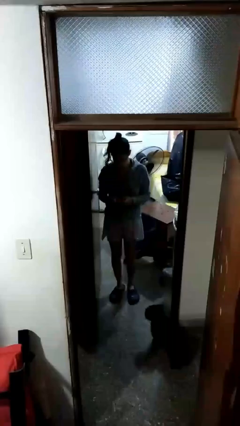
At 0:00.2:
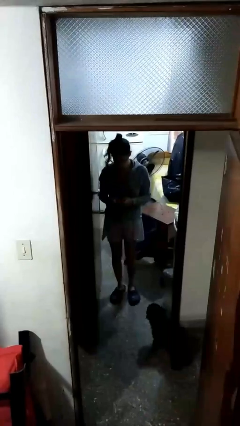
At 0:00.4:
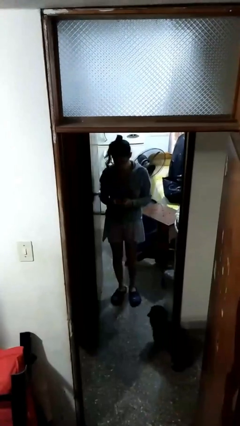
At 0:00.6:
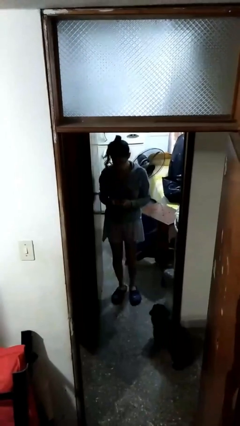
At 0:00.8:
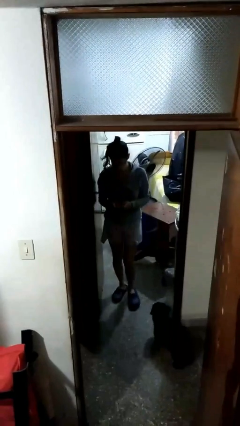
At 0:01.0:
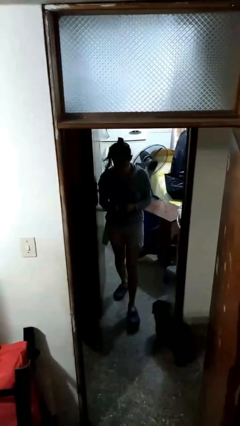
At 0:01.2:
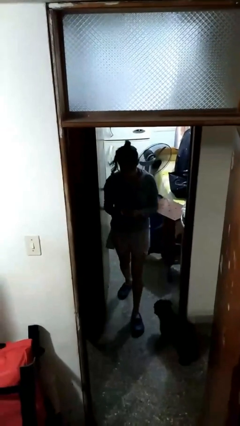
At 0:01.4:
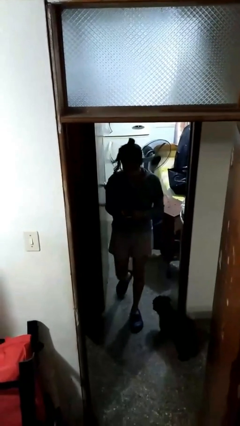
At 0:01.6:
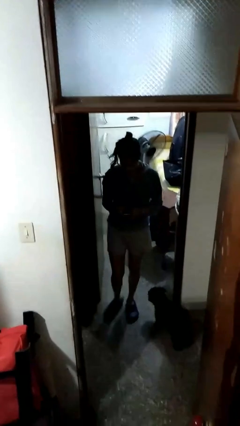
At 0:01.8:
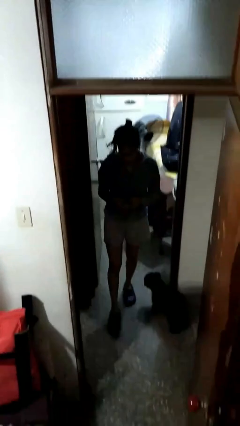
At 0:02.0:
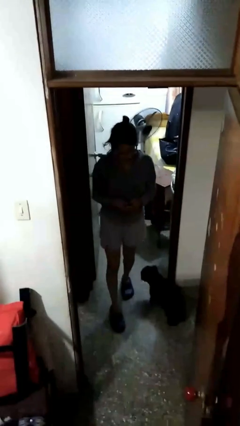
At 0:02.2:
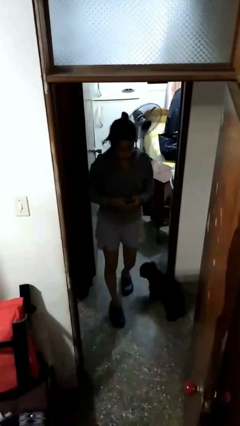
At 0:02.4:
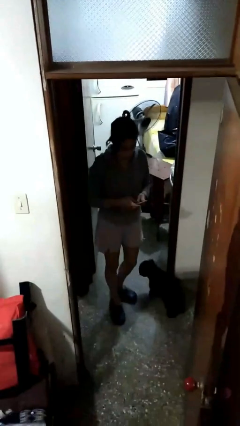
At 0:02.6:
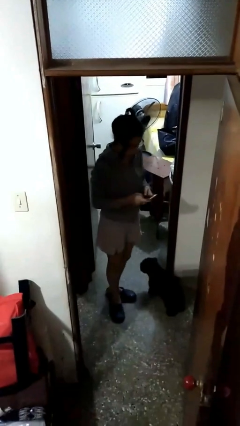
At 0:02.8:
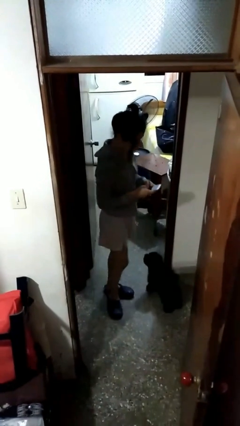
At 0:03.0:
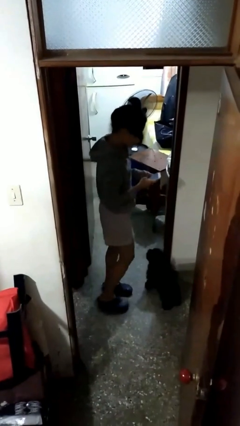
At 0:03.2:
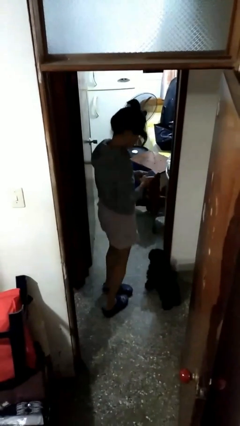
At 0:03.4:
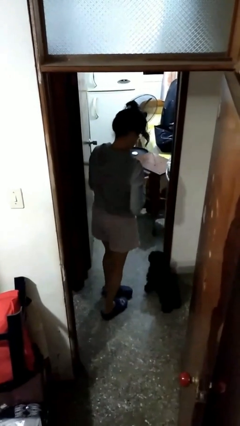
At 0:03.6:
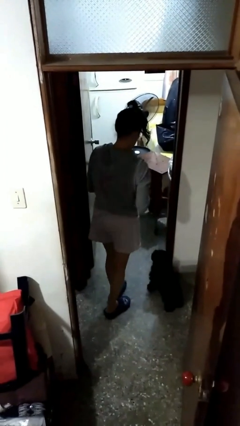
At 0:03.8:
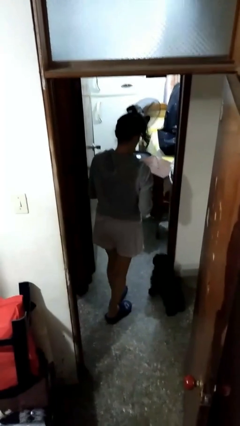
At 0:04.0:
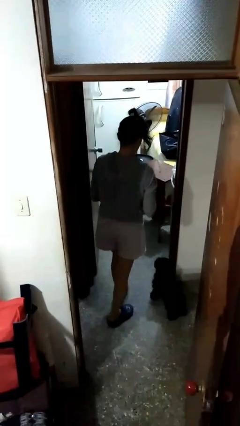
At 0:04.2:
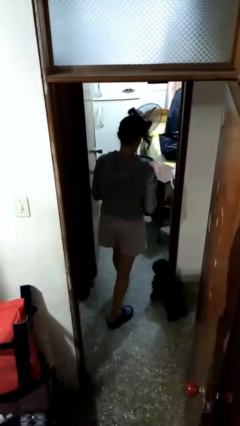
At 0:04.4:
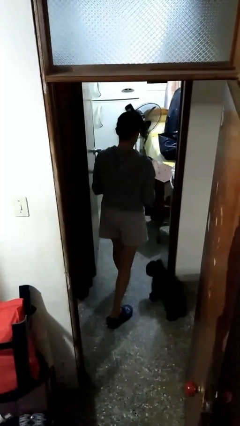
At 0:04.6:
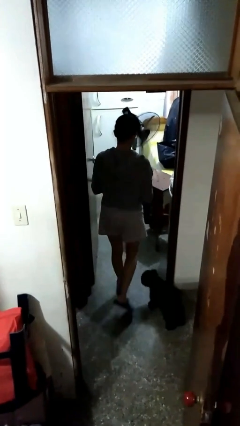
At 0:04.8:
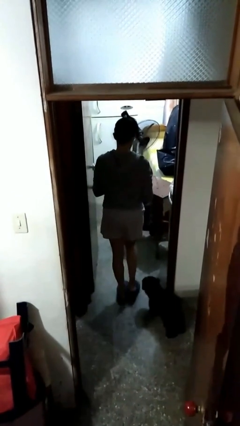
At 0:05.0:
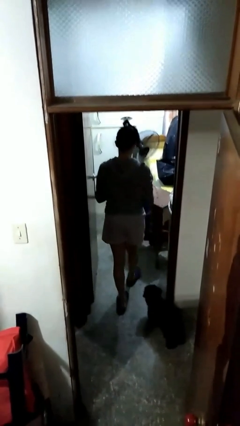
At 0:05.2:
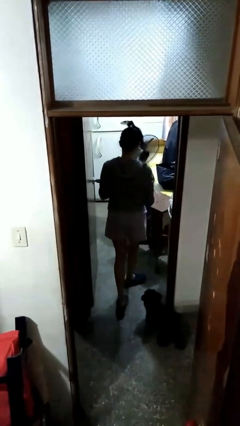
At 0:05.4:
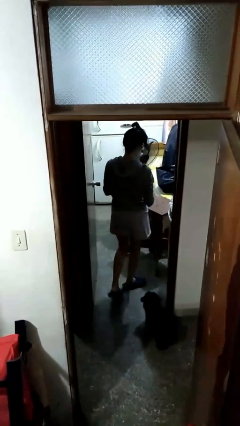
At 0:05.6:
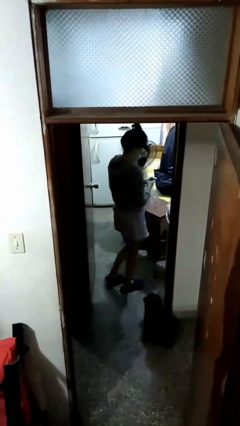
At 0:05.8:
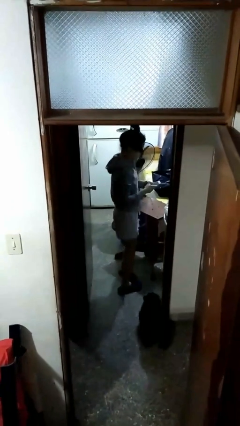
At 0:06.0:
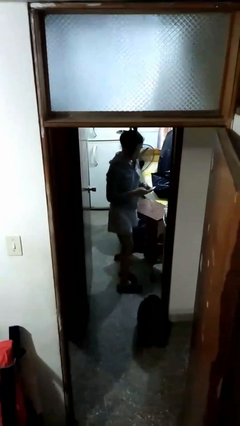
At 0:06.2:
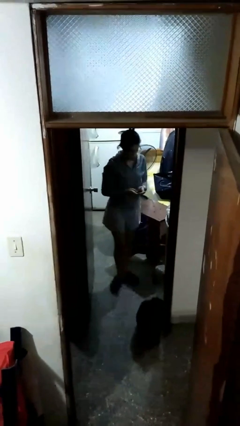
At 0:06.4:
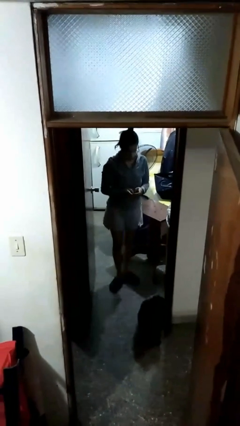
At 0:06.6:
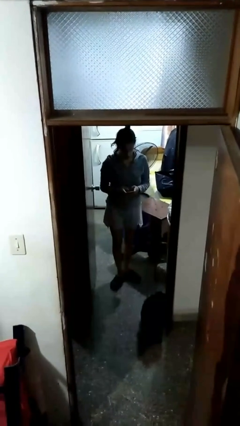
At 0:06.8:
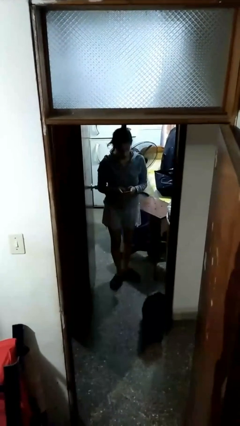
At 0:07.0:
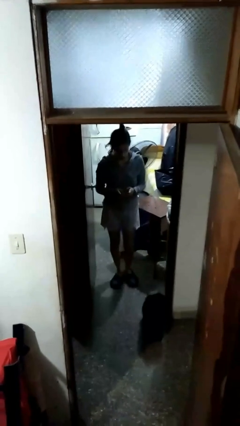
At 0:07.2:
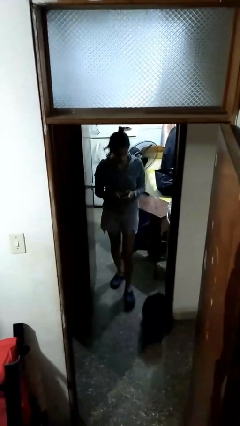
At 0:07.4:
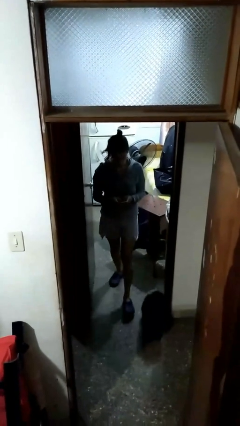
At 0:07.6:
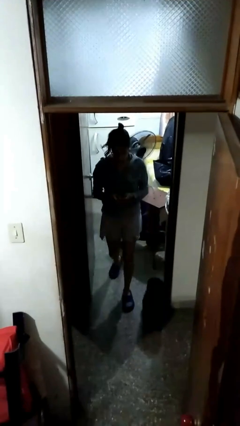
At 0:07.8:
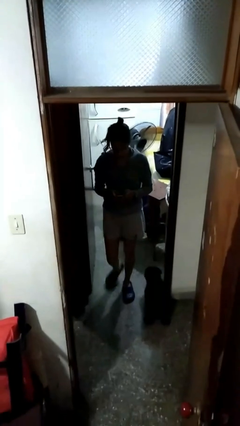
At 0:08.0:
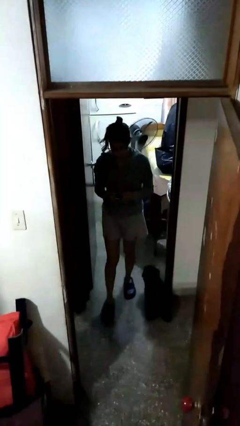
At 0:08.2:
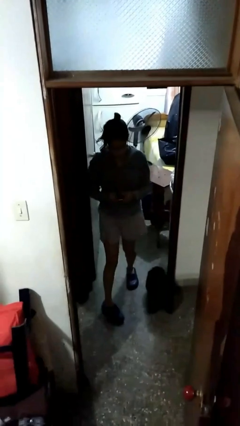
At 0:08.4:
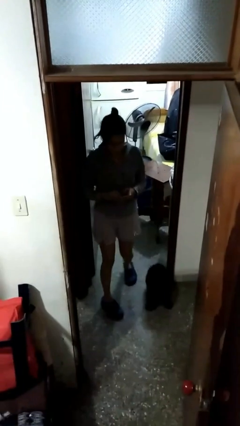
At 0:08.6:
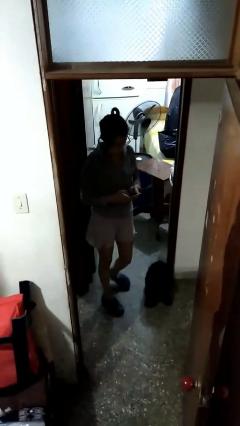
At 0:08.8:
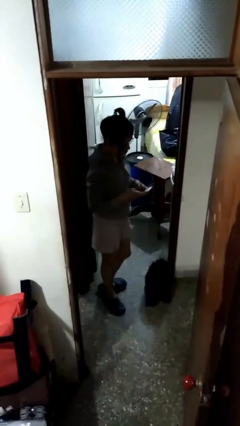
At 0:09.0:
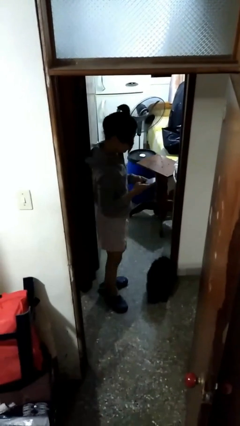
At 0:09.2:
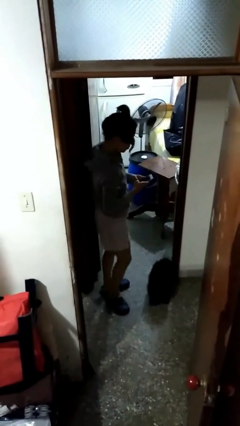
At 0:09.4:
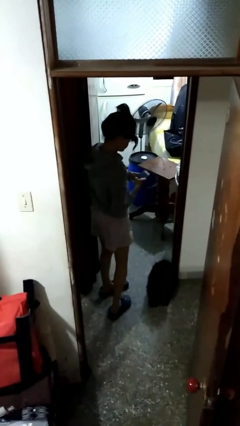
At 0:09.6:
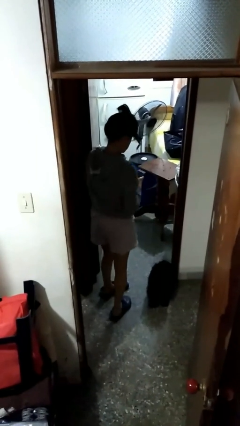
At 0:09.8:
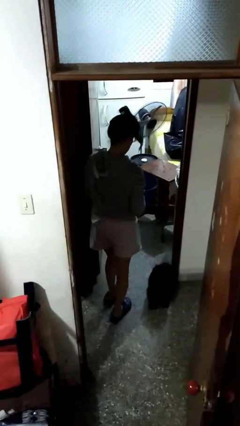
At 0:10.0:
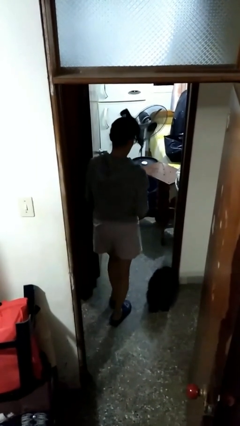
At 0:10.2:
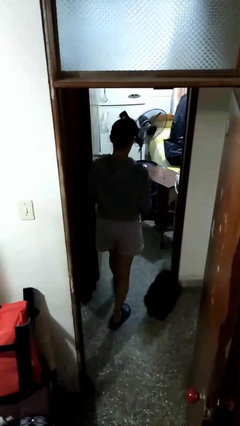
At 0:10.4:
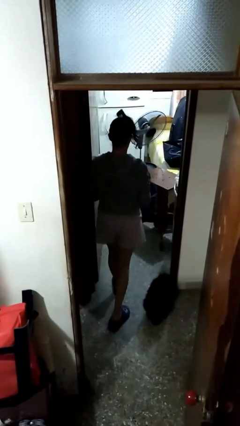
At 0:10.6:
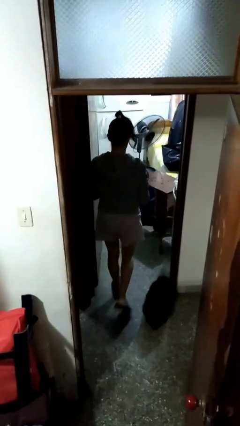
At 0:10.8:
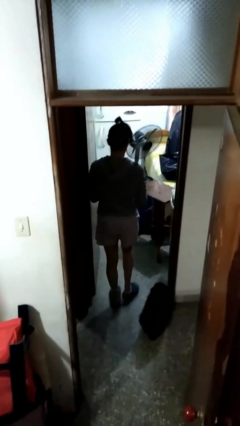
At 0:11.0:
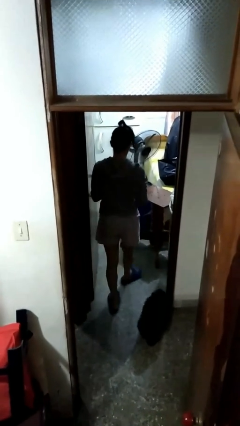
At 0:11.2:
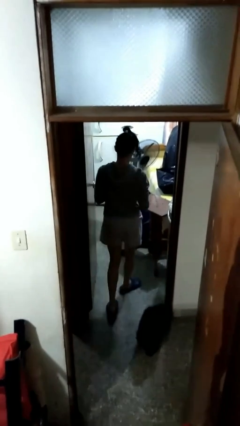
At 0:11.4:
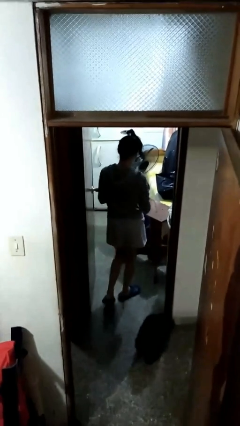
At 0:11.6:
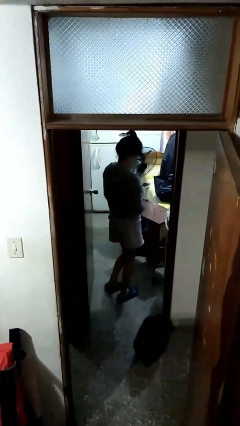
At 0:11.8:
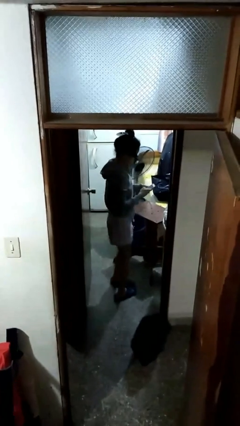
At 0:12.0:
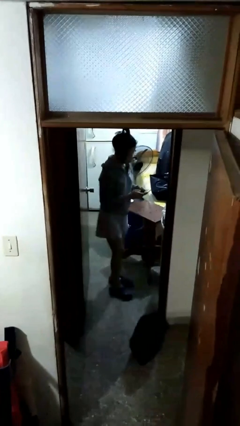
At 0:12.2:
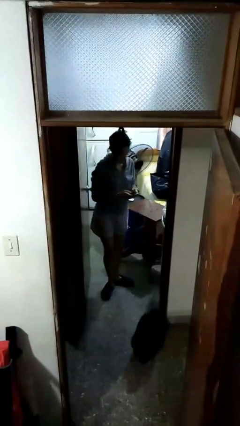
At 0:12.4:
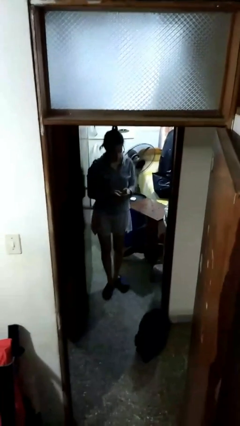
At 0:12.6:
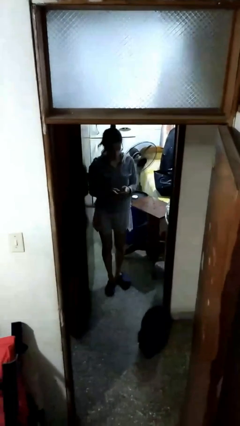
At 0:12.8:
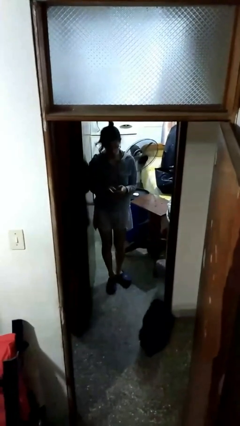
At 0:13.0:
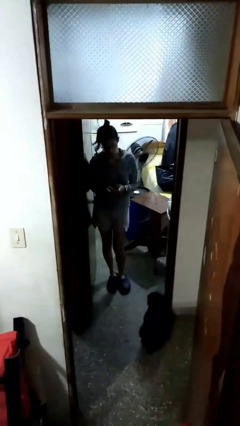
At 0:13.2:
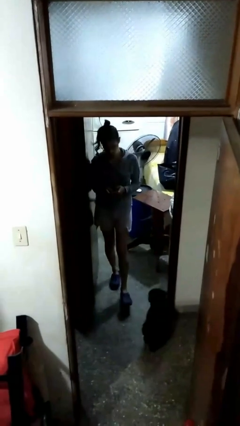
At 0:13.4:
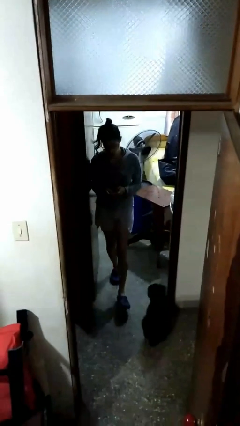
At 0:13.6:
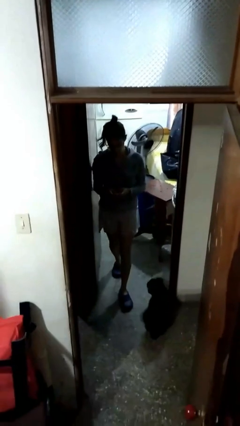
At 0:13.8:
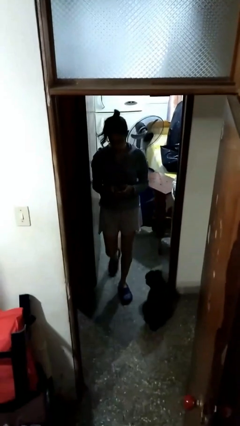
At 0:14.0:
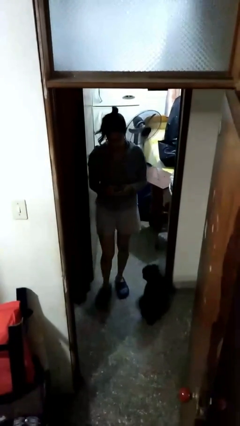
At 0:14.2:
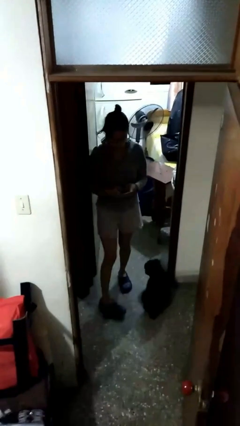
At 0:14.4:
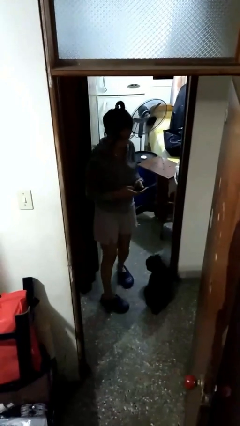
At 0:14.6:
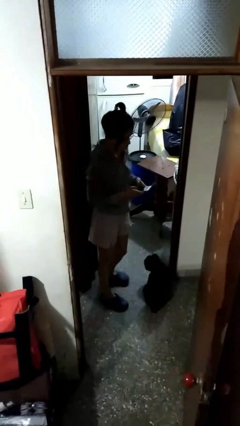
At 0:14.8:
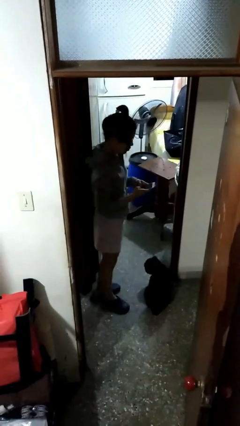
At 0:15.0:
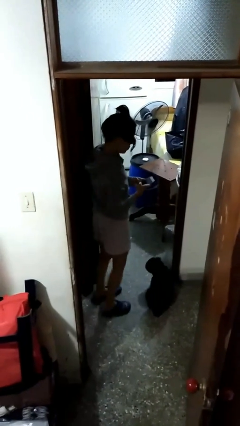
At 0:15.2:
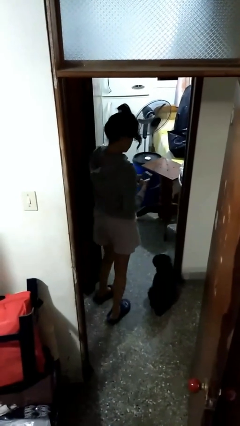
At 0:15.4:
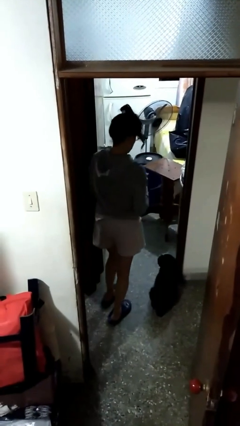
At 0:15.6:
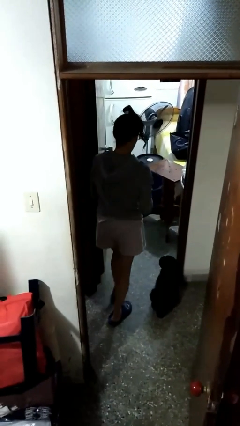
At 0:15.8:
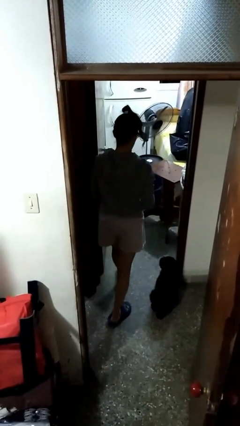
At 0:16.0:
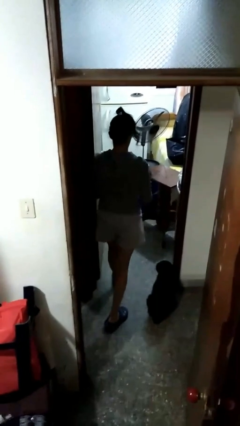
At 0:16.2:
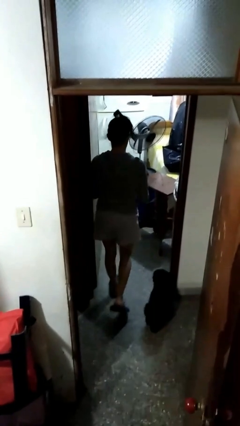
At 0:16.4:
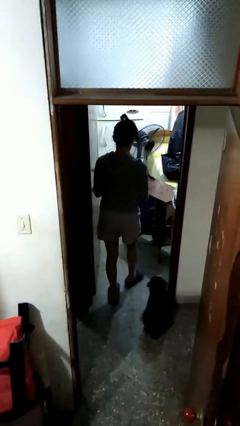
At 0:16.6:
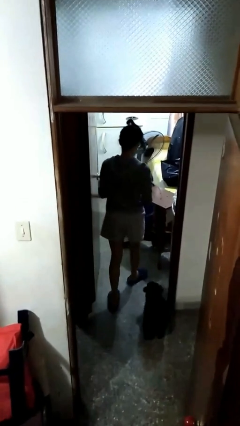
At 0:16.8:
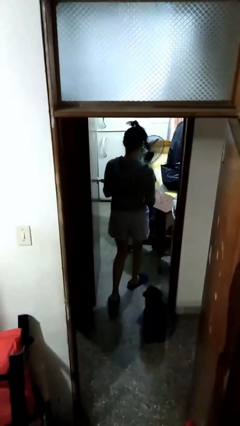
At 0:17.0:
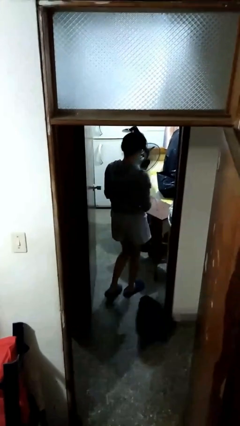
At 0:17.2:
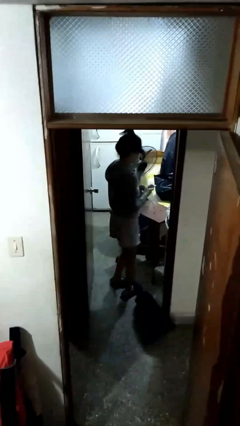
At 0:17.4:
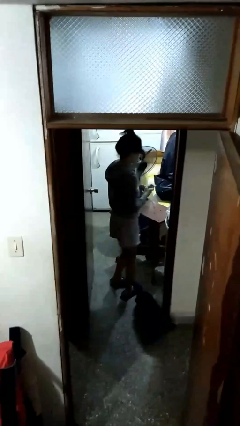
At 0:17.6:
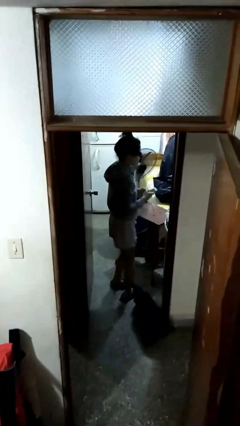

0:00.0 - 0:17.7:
person texts on phone

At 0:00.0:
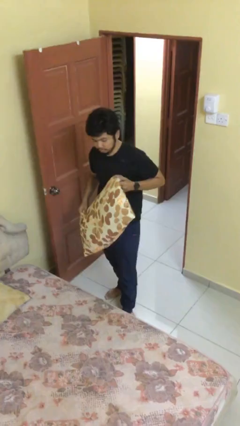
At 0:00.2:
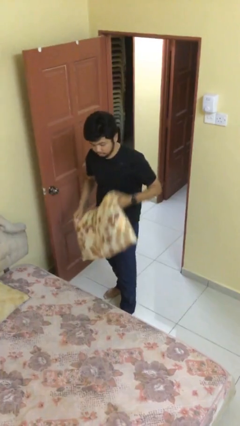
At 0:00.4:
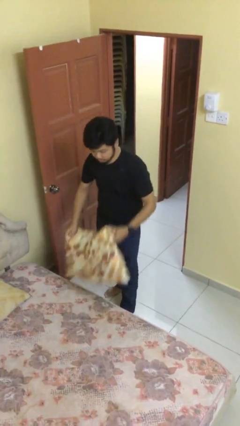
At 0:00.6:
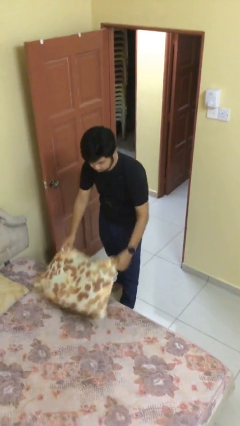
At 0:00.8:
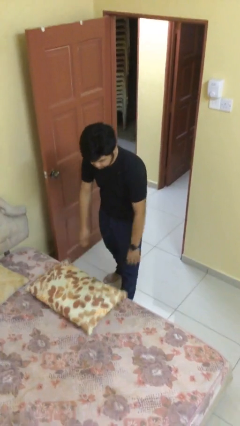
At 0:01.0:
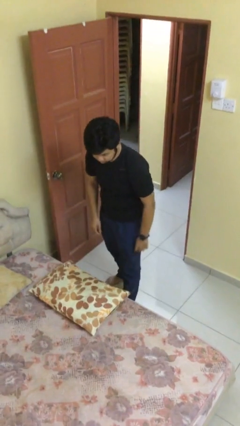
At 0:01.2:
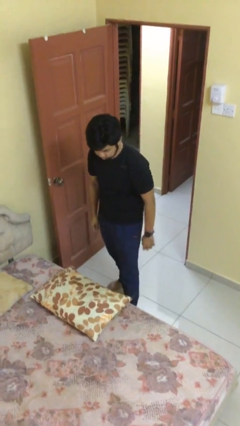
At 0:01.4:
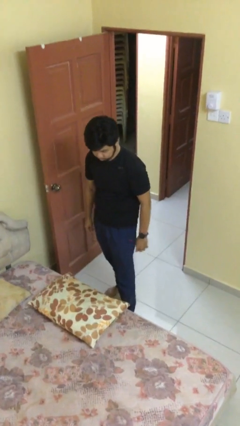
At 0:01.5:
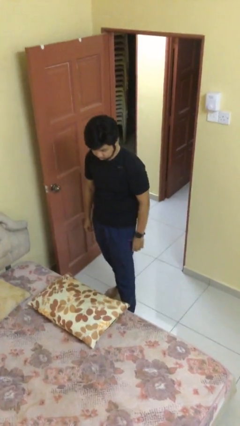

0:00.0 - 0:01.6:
person puts down object on bed
